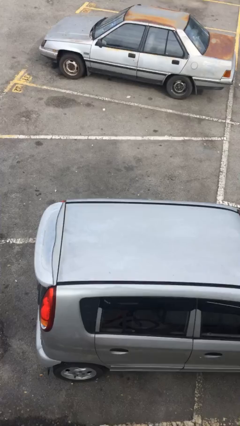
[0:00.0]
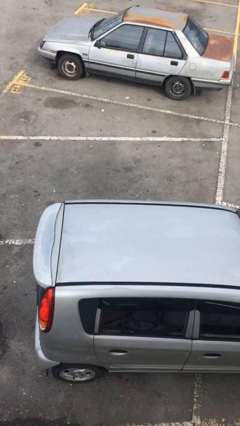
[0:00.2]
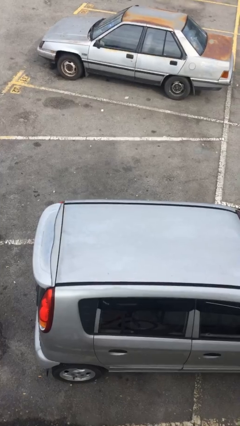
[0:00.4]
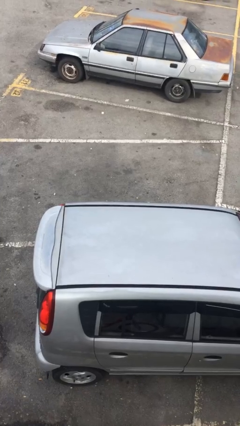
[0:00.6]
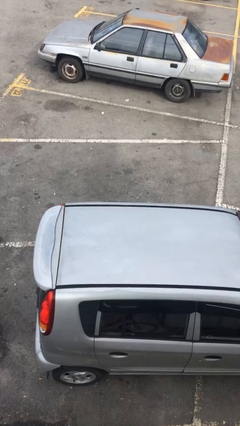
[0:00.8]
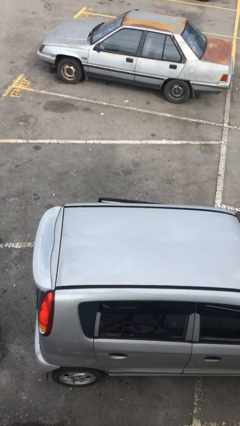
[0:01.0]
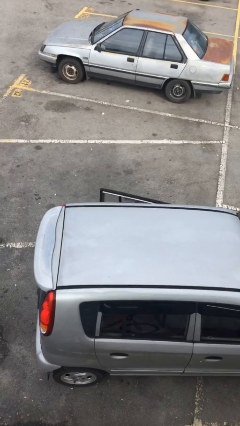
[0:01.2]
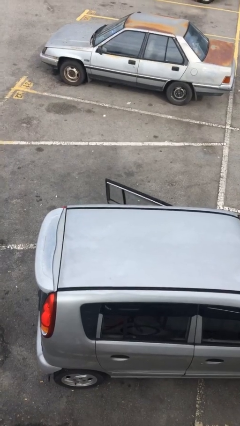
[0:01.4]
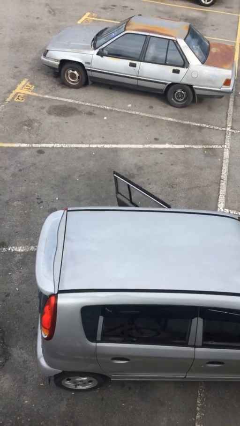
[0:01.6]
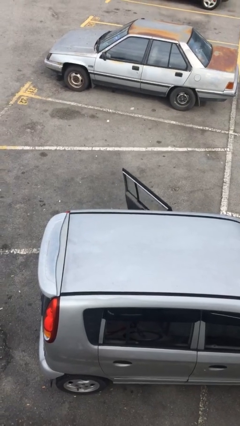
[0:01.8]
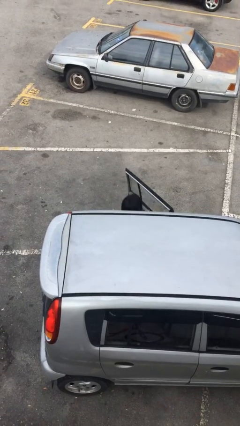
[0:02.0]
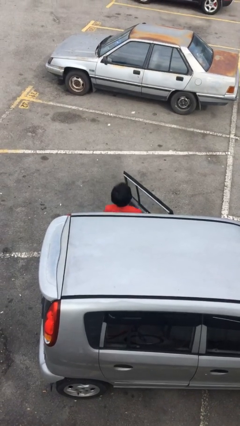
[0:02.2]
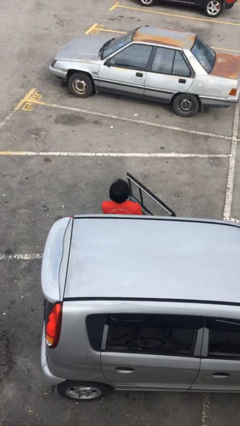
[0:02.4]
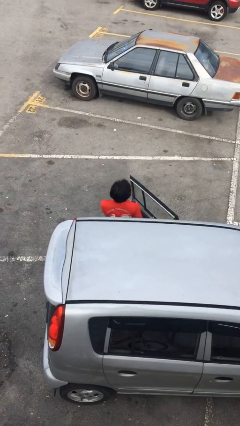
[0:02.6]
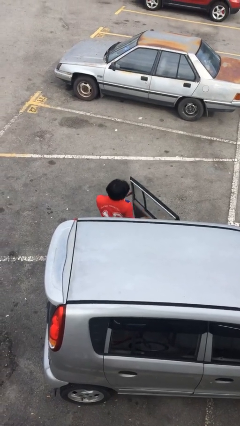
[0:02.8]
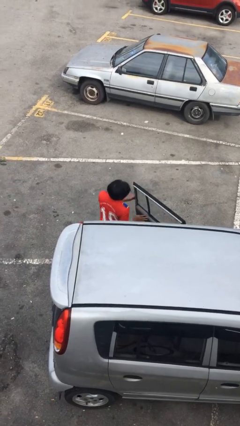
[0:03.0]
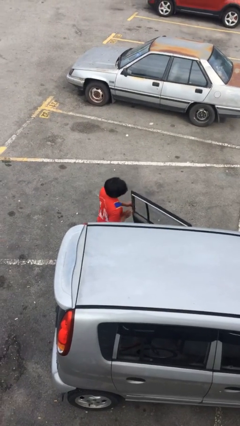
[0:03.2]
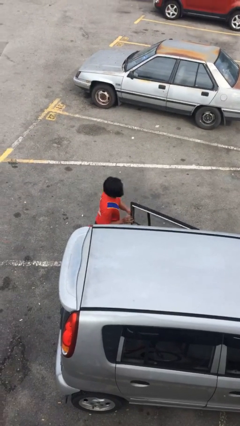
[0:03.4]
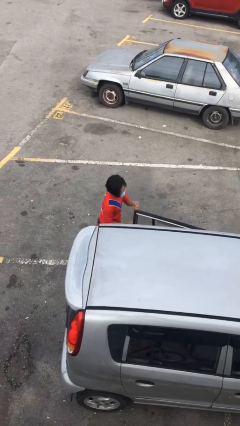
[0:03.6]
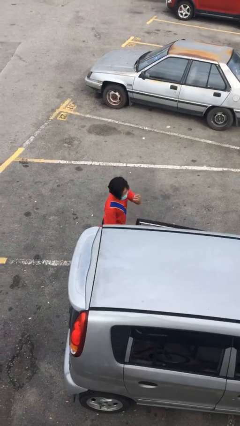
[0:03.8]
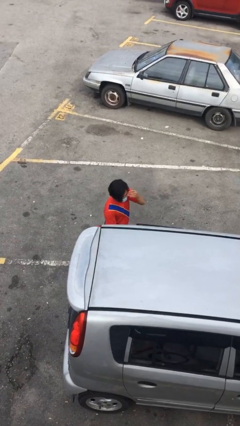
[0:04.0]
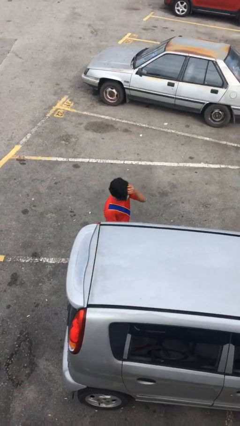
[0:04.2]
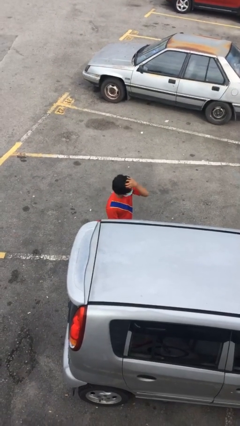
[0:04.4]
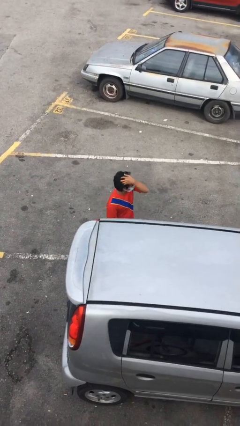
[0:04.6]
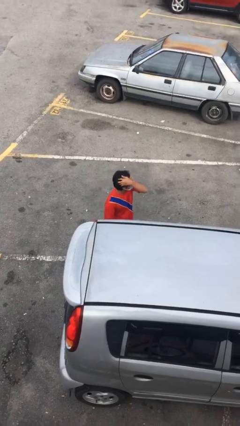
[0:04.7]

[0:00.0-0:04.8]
person exits car

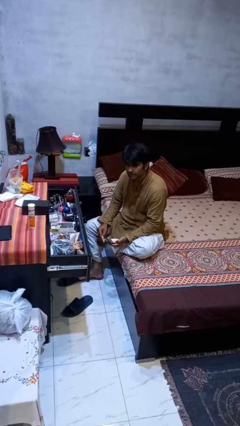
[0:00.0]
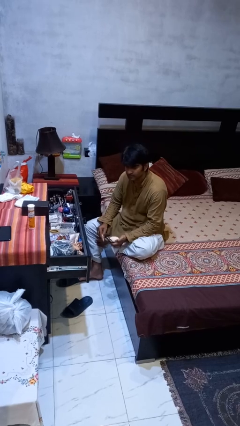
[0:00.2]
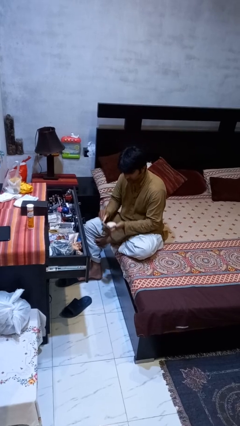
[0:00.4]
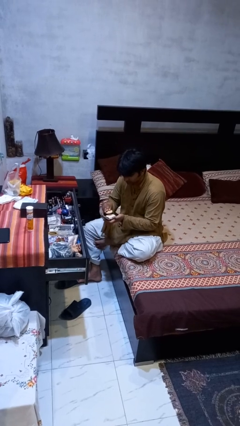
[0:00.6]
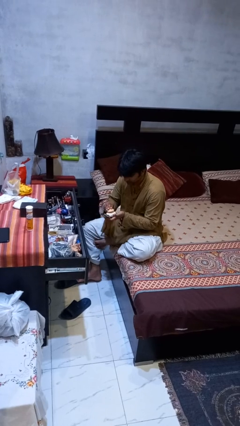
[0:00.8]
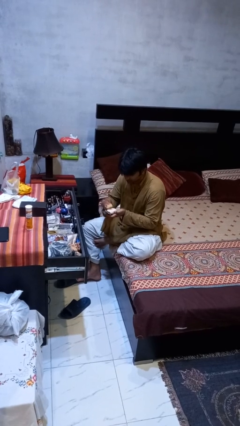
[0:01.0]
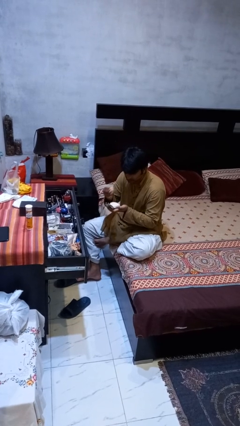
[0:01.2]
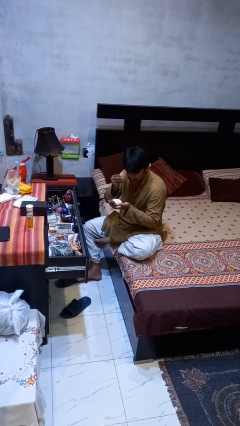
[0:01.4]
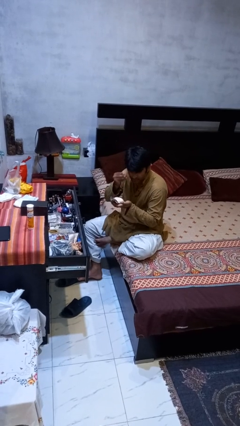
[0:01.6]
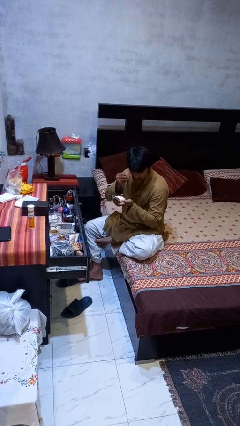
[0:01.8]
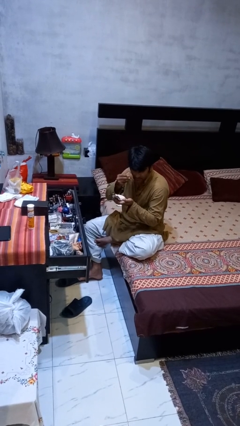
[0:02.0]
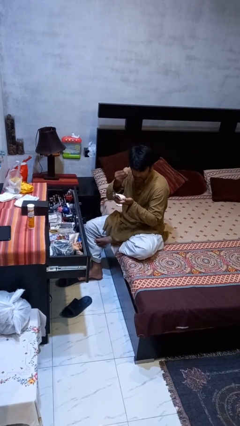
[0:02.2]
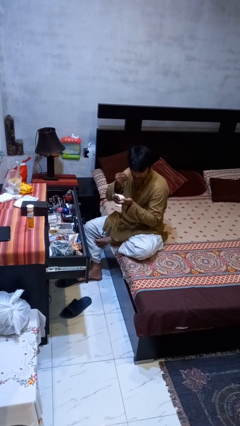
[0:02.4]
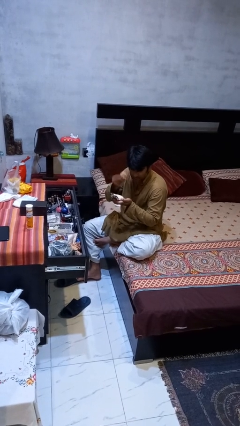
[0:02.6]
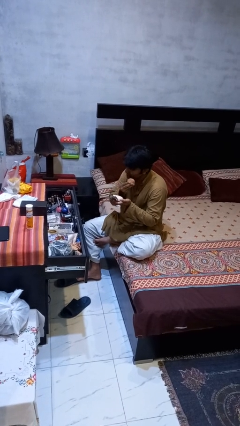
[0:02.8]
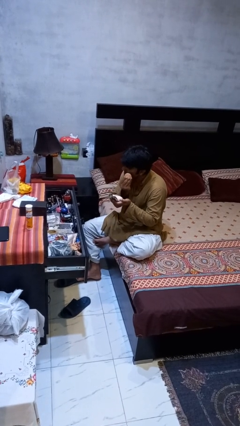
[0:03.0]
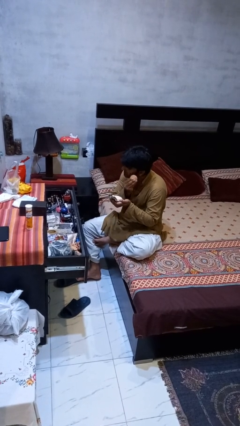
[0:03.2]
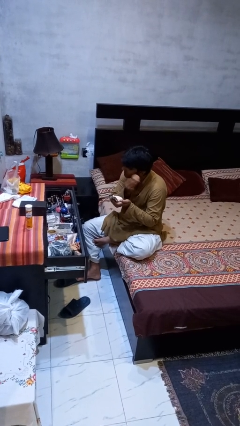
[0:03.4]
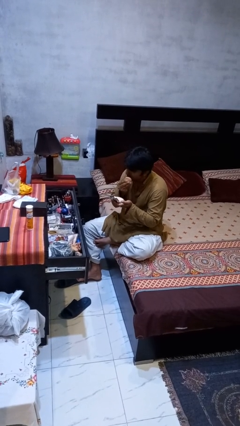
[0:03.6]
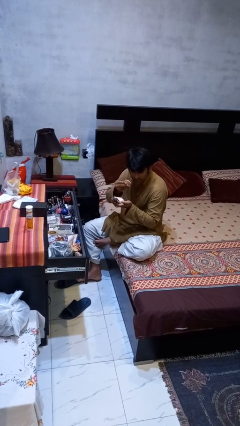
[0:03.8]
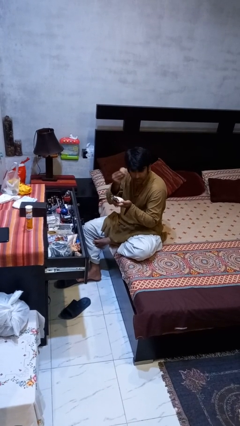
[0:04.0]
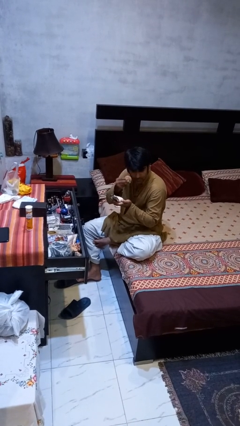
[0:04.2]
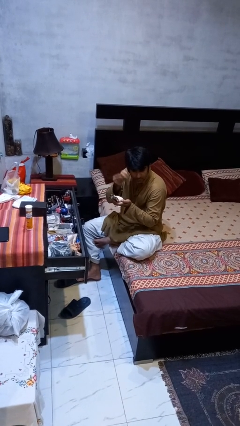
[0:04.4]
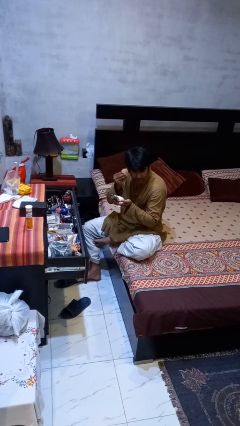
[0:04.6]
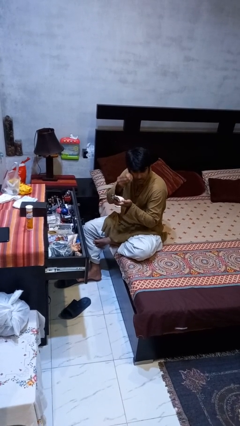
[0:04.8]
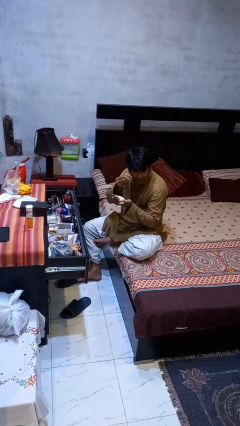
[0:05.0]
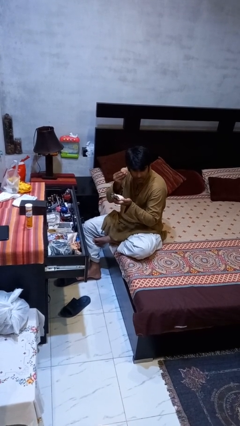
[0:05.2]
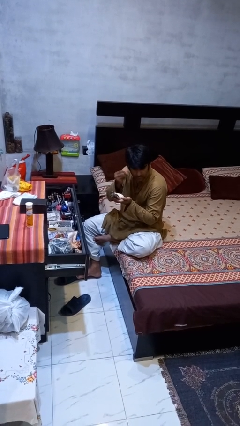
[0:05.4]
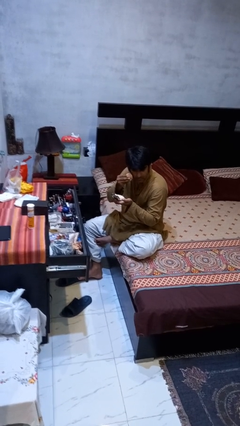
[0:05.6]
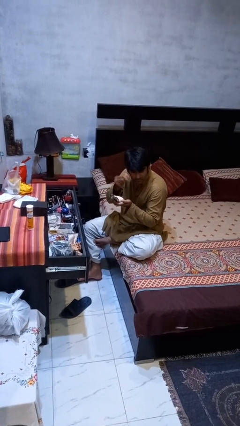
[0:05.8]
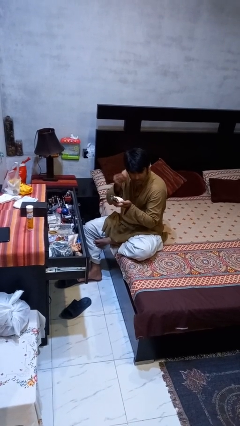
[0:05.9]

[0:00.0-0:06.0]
person applies foundation makeup

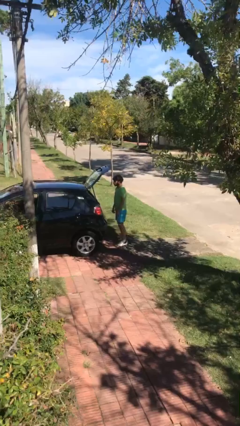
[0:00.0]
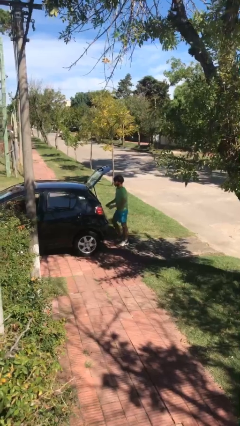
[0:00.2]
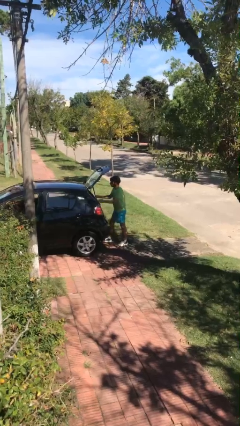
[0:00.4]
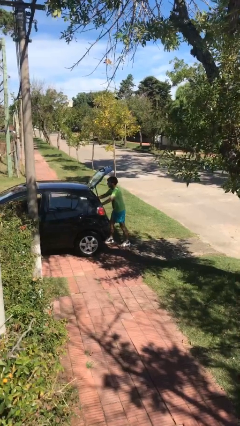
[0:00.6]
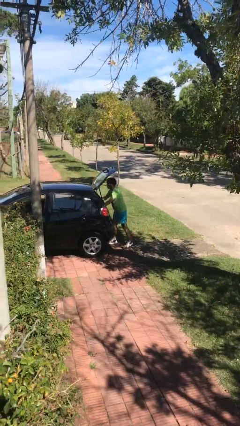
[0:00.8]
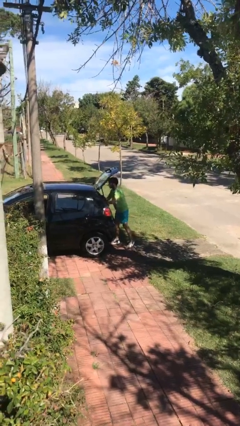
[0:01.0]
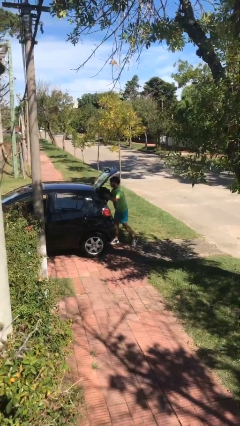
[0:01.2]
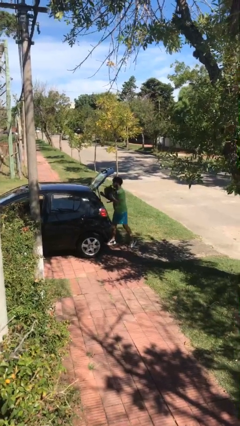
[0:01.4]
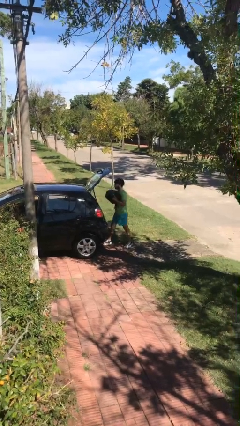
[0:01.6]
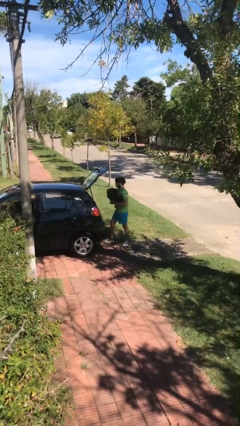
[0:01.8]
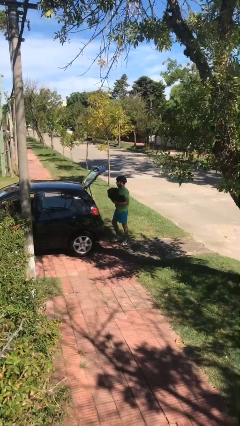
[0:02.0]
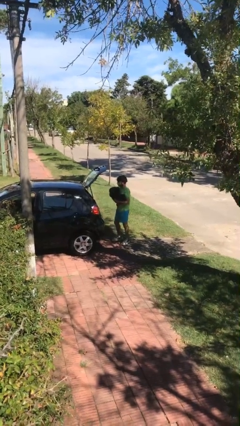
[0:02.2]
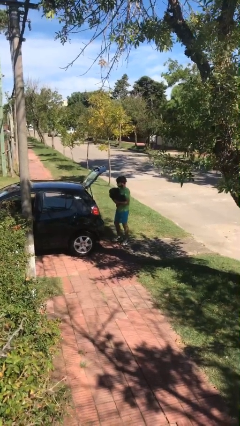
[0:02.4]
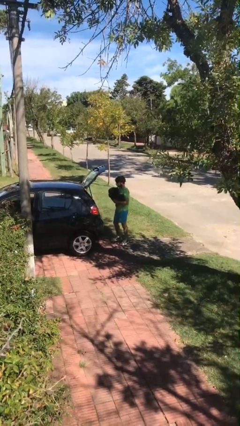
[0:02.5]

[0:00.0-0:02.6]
person unloads car

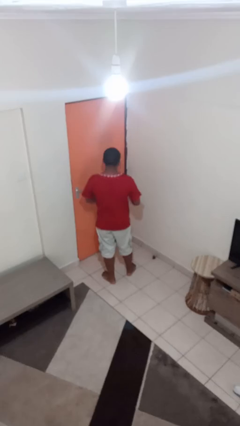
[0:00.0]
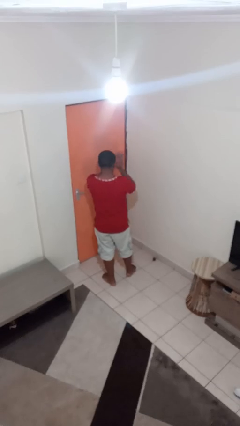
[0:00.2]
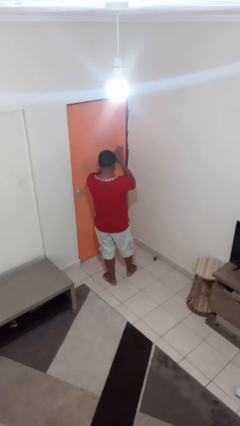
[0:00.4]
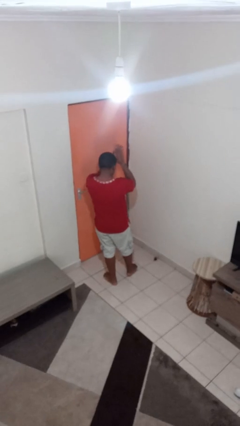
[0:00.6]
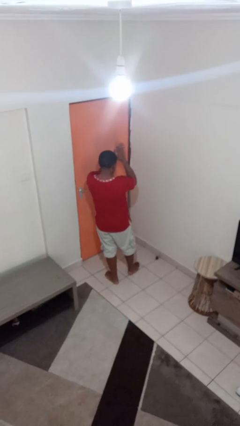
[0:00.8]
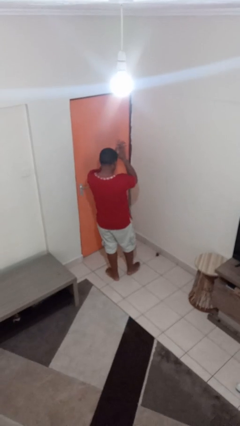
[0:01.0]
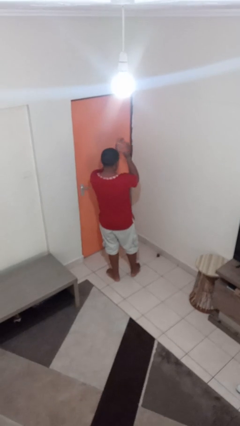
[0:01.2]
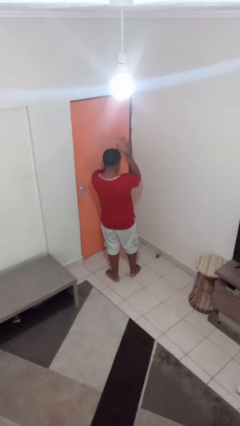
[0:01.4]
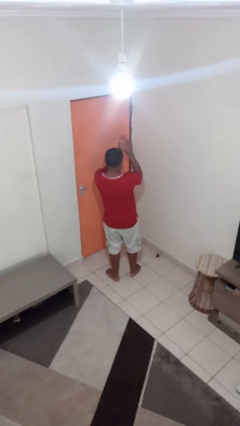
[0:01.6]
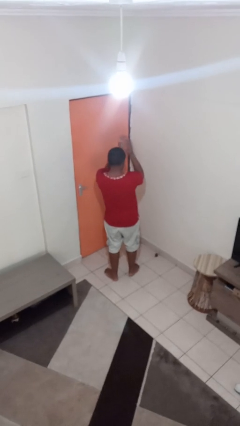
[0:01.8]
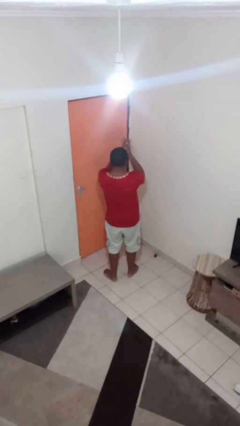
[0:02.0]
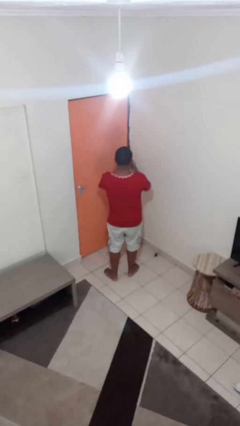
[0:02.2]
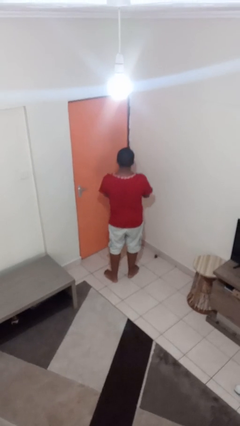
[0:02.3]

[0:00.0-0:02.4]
person claps hands

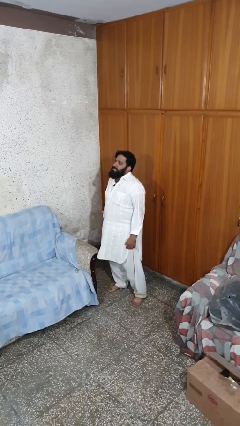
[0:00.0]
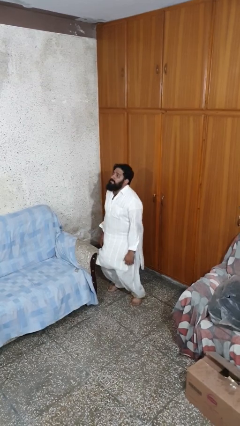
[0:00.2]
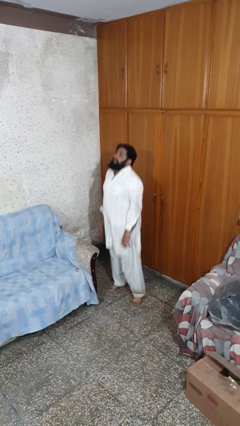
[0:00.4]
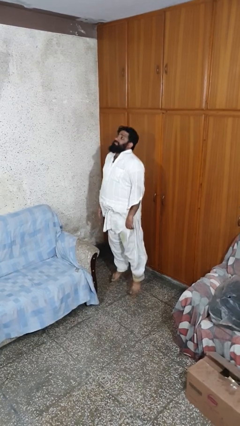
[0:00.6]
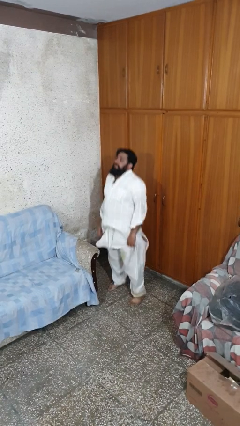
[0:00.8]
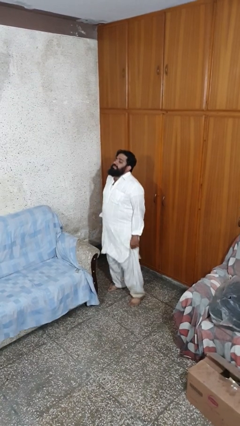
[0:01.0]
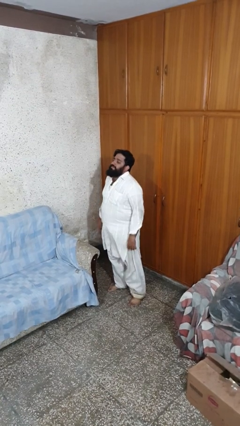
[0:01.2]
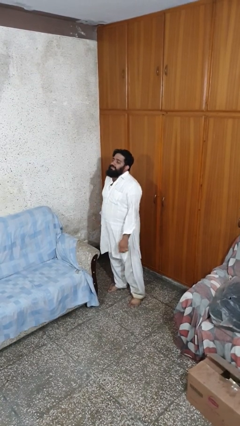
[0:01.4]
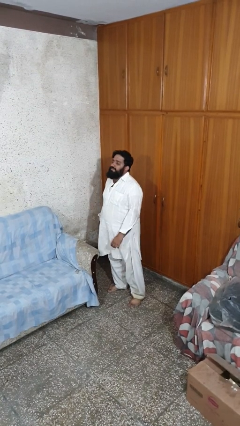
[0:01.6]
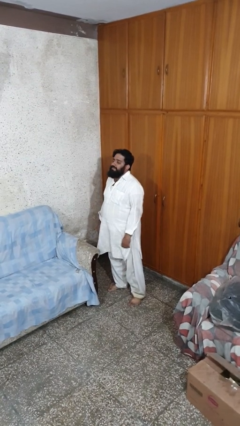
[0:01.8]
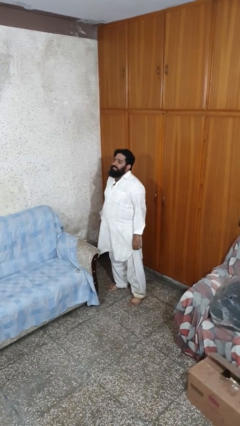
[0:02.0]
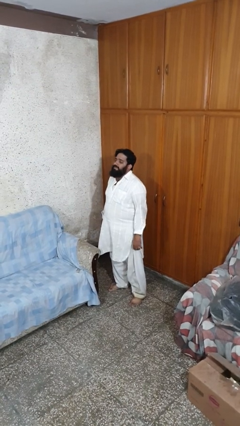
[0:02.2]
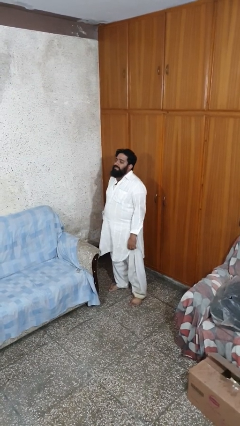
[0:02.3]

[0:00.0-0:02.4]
person jumps
